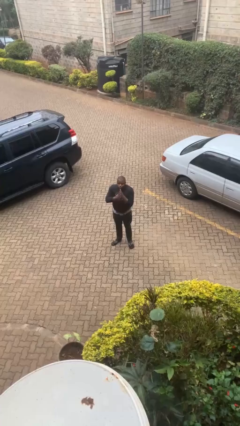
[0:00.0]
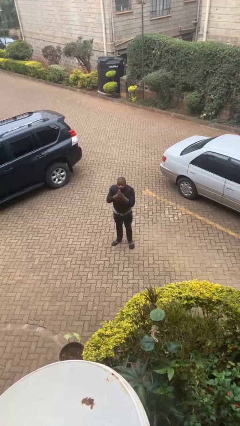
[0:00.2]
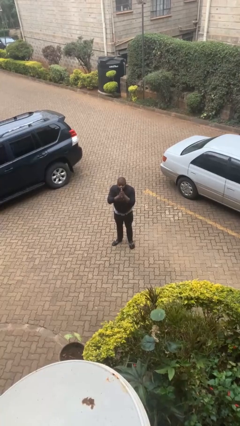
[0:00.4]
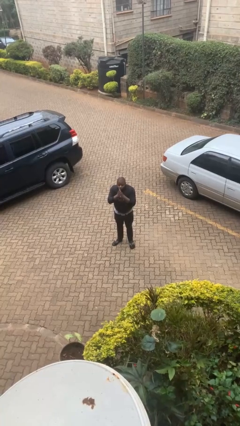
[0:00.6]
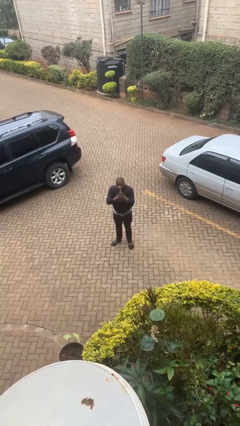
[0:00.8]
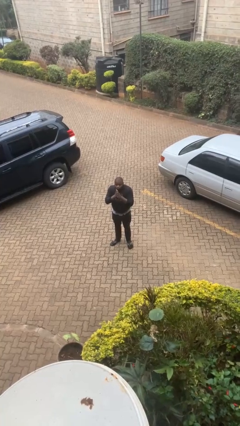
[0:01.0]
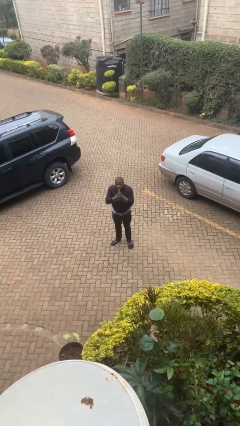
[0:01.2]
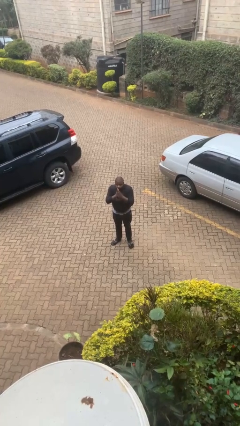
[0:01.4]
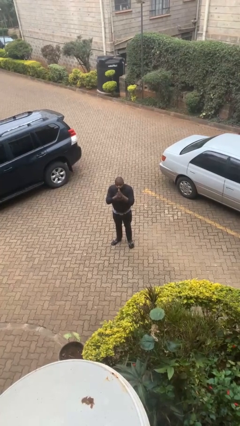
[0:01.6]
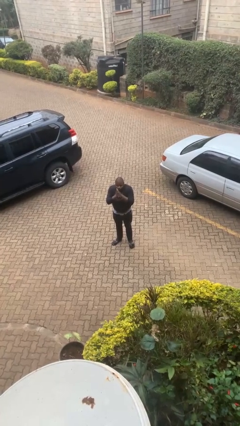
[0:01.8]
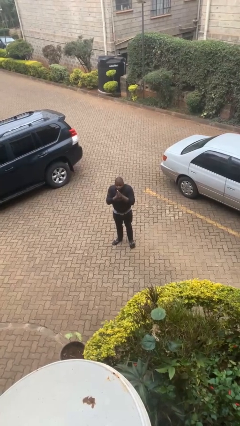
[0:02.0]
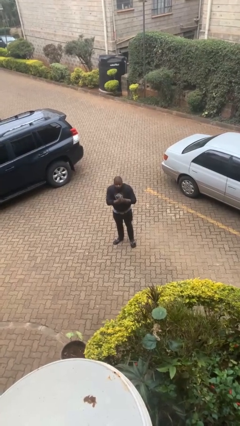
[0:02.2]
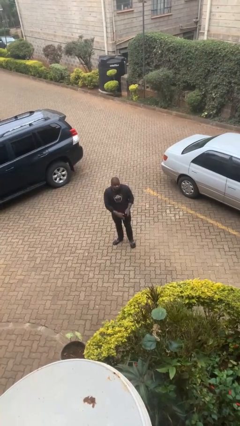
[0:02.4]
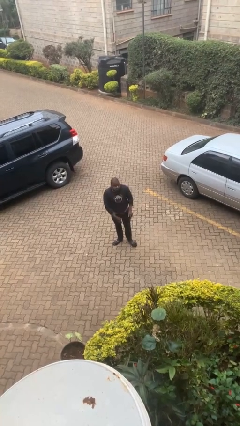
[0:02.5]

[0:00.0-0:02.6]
person blows into hands

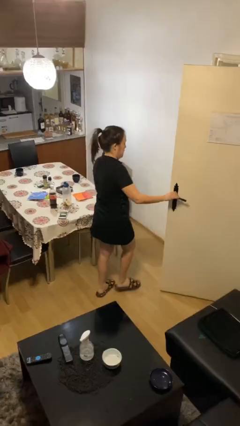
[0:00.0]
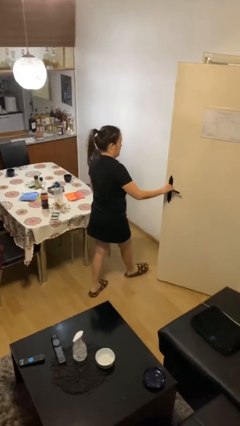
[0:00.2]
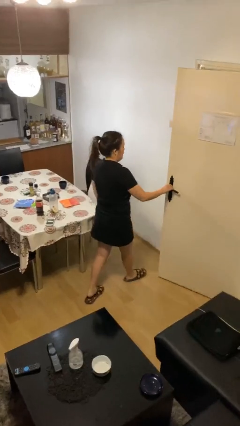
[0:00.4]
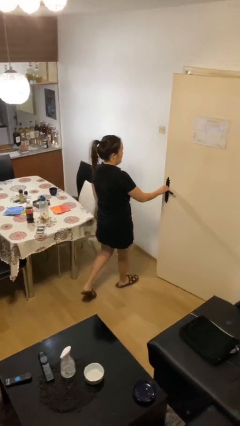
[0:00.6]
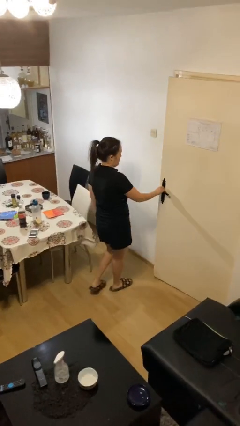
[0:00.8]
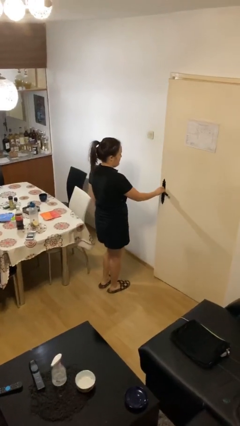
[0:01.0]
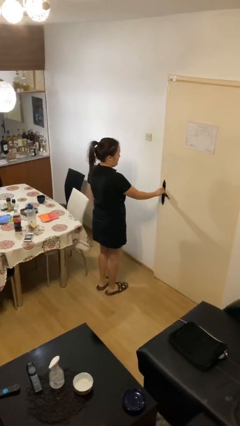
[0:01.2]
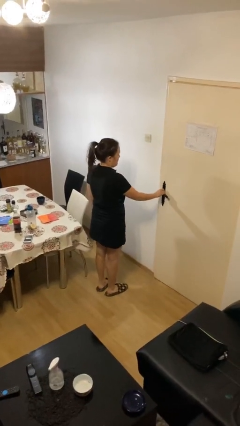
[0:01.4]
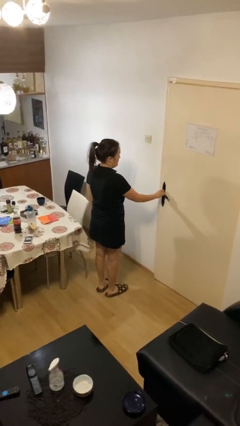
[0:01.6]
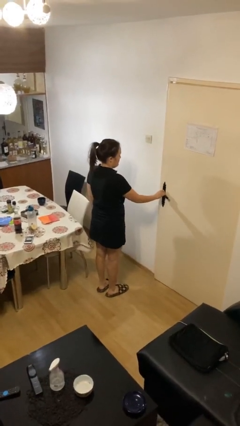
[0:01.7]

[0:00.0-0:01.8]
person closes facility door

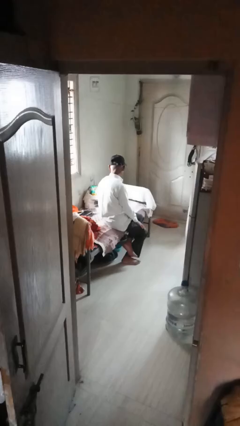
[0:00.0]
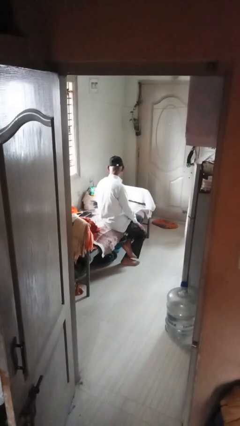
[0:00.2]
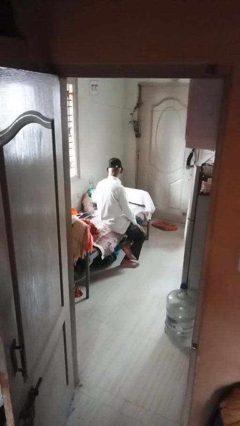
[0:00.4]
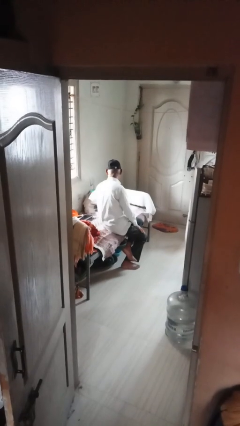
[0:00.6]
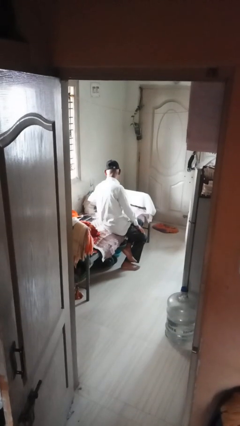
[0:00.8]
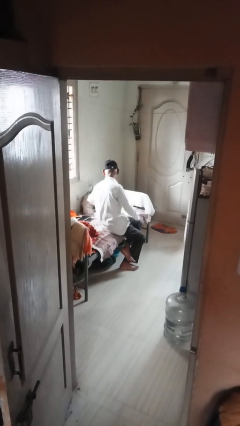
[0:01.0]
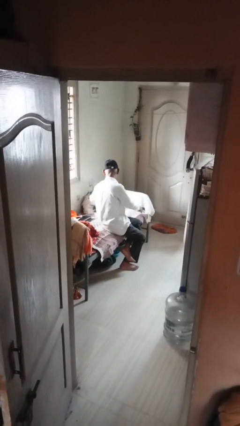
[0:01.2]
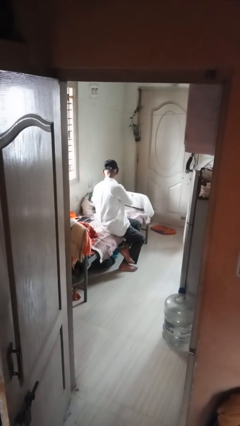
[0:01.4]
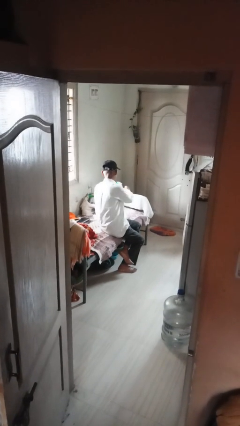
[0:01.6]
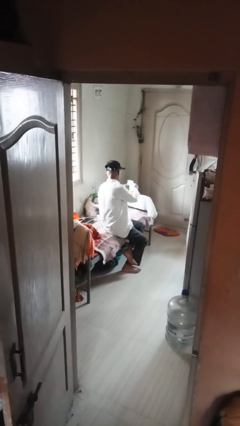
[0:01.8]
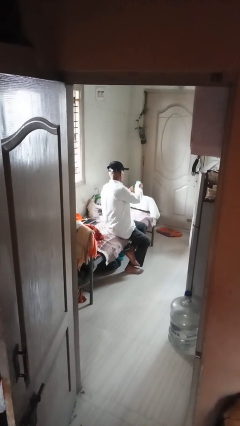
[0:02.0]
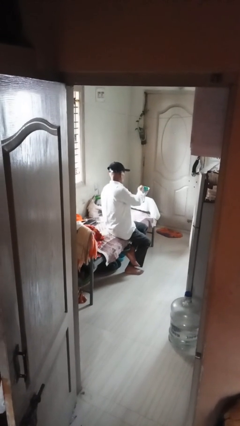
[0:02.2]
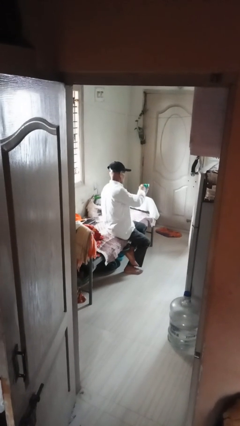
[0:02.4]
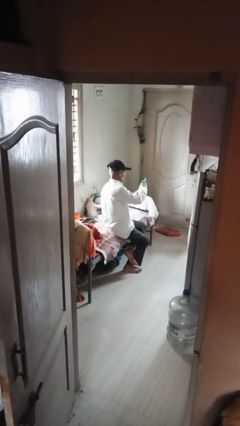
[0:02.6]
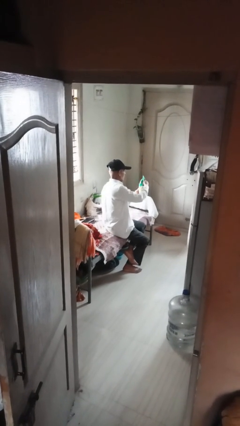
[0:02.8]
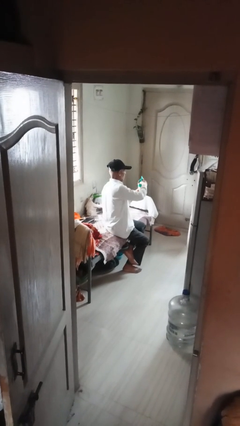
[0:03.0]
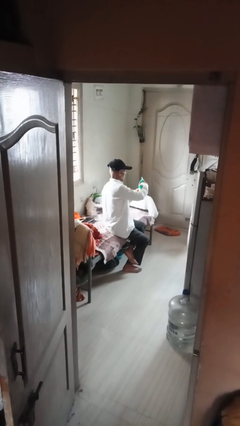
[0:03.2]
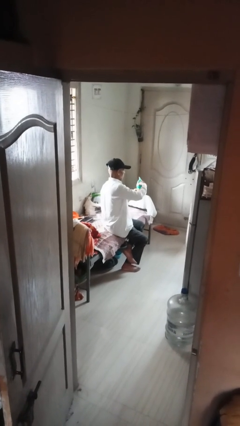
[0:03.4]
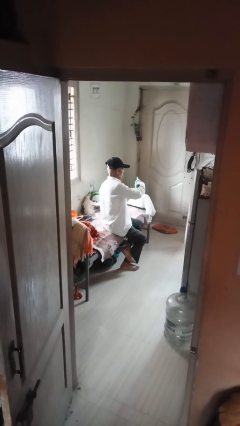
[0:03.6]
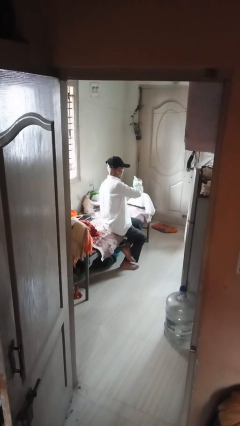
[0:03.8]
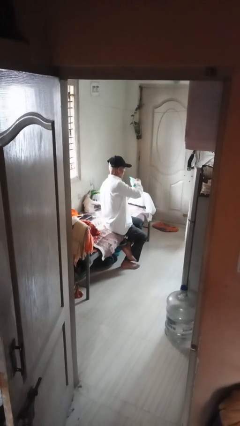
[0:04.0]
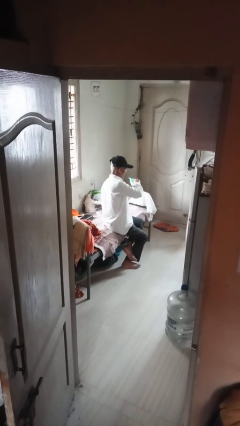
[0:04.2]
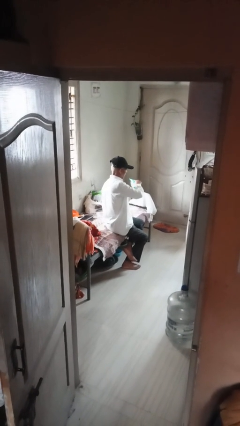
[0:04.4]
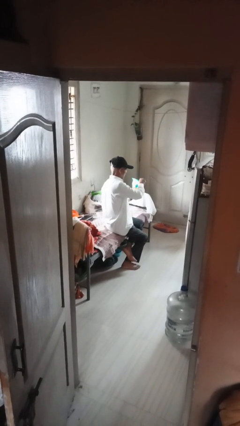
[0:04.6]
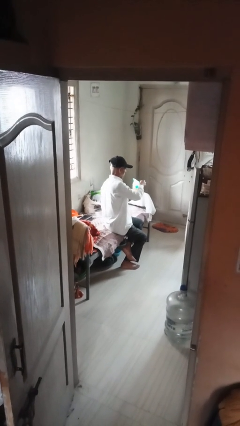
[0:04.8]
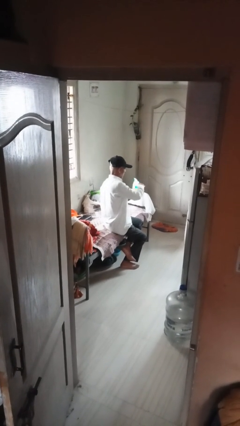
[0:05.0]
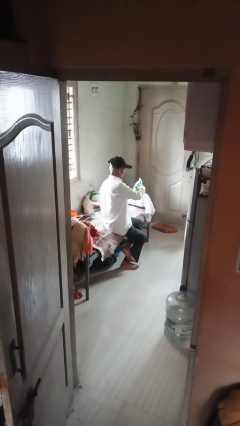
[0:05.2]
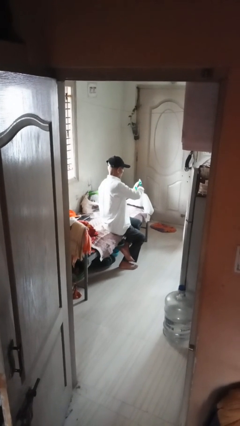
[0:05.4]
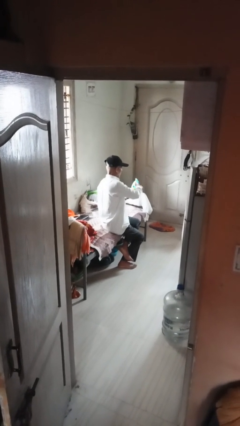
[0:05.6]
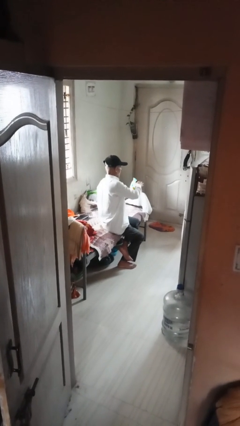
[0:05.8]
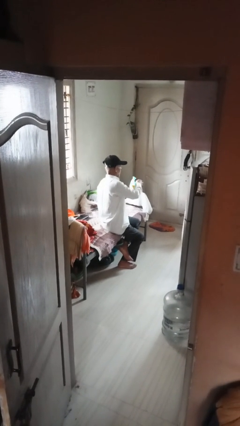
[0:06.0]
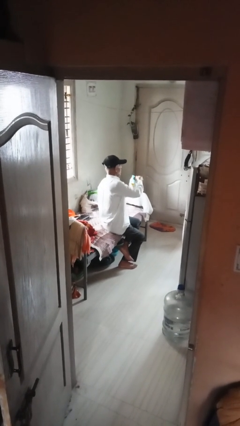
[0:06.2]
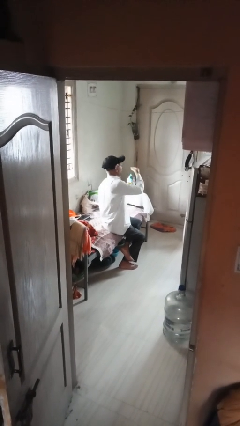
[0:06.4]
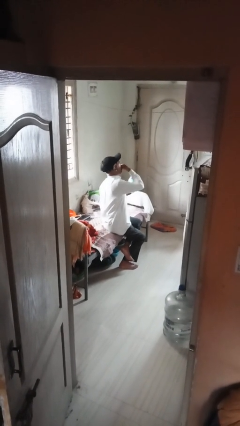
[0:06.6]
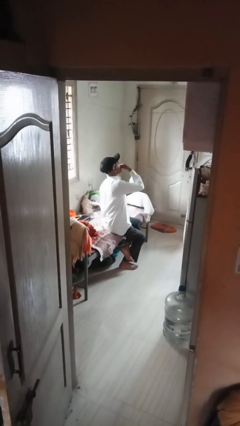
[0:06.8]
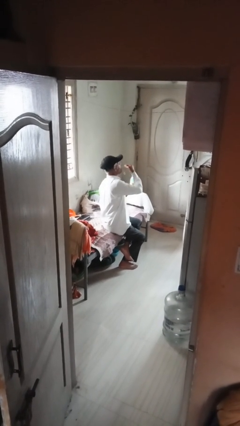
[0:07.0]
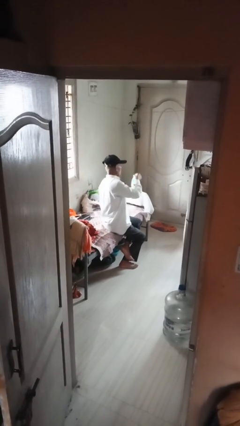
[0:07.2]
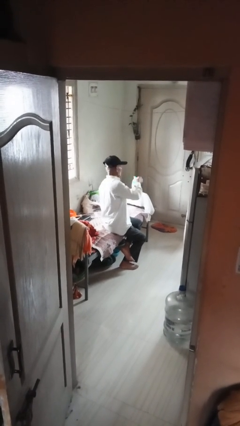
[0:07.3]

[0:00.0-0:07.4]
person eats snack from bag

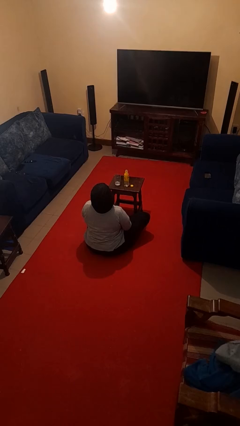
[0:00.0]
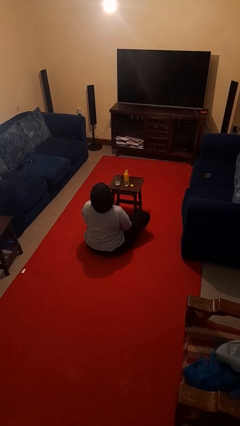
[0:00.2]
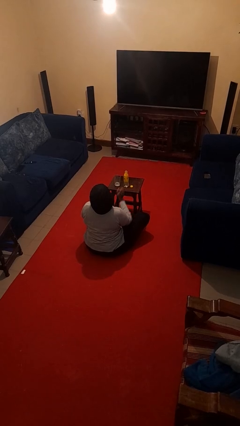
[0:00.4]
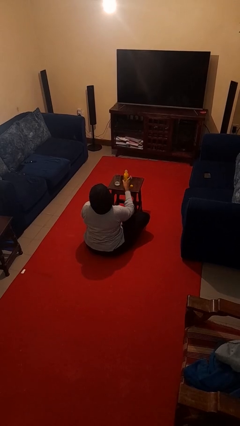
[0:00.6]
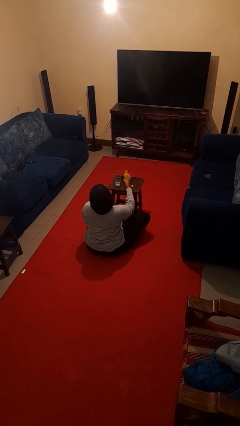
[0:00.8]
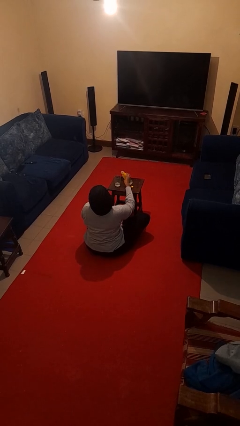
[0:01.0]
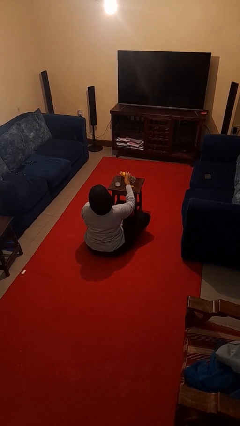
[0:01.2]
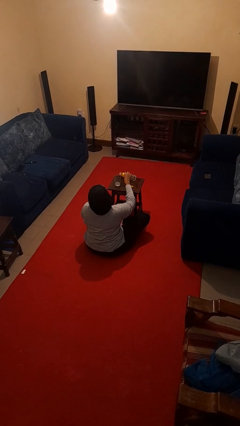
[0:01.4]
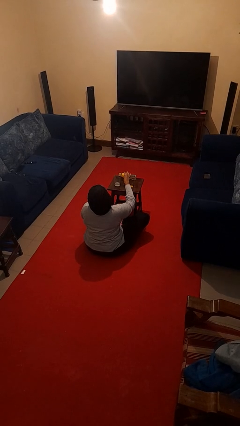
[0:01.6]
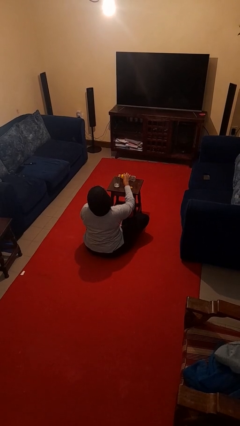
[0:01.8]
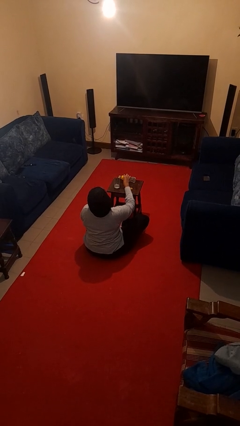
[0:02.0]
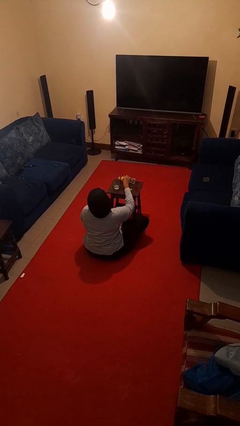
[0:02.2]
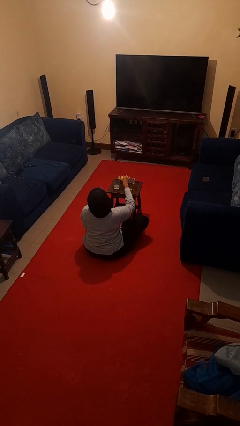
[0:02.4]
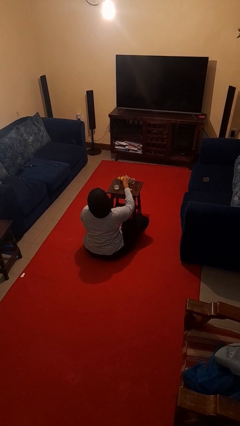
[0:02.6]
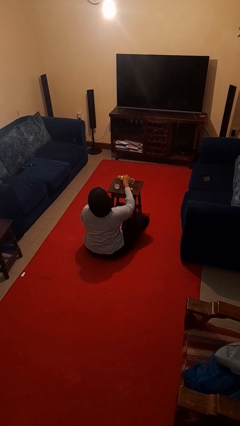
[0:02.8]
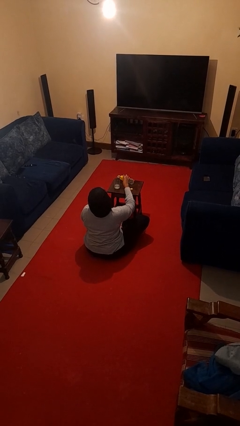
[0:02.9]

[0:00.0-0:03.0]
person pours liquid into cup

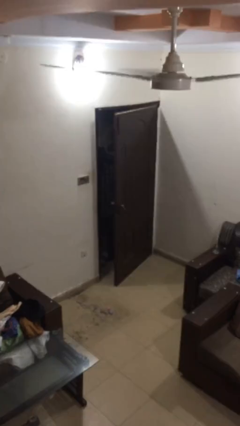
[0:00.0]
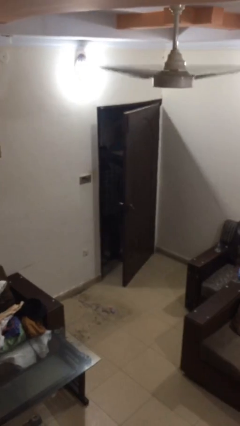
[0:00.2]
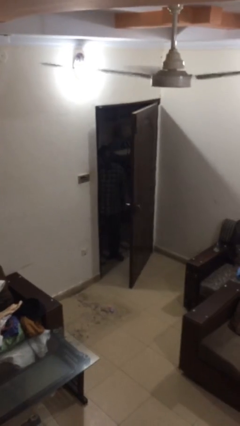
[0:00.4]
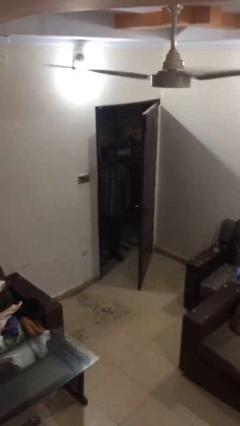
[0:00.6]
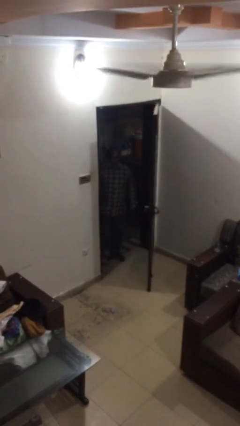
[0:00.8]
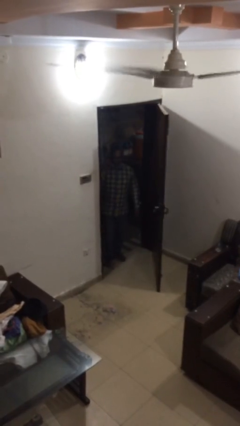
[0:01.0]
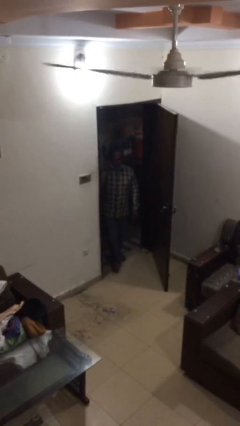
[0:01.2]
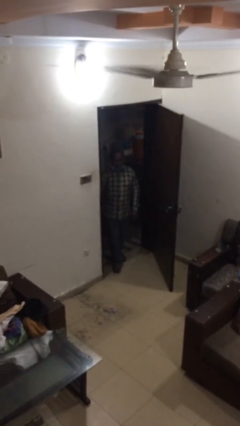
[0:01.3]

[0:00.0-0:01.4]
person opens facility door

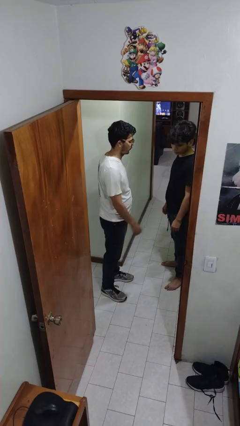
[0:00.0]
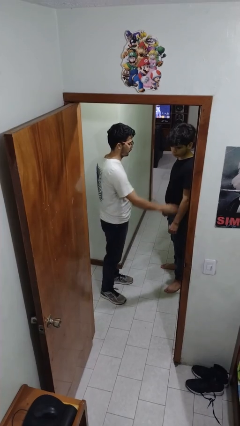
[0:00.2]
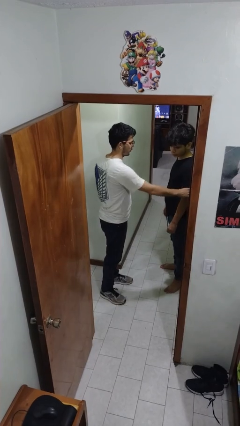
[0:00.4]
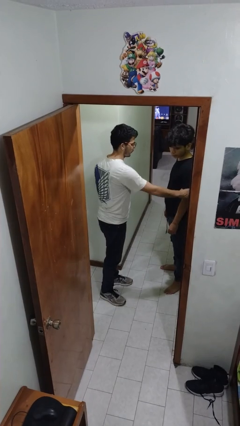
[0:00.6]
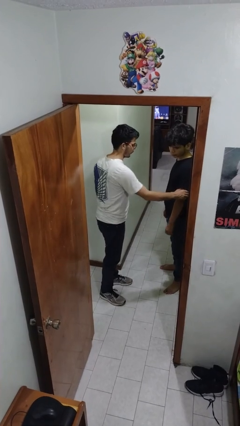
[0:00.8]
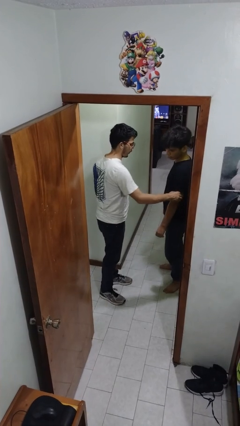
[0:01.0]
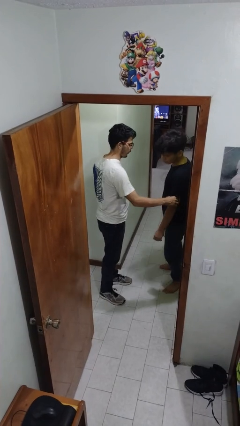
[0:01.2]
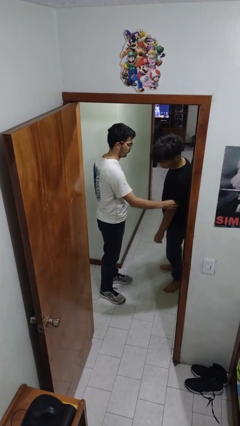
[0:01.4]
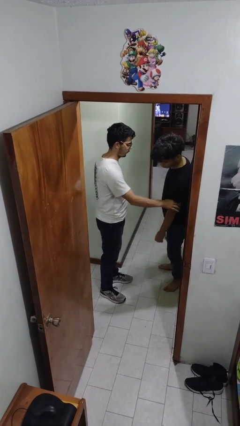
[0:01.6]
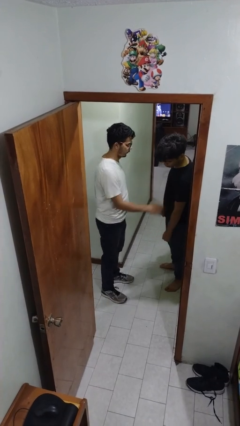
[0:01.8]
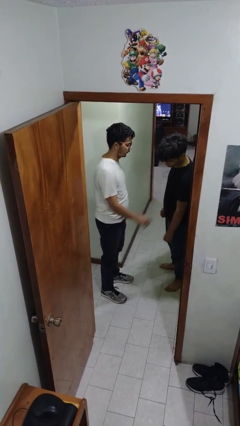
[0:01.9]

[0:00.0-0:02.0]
person grabs person by bicep
